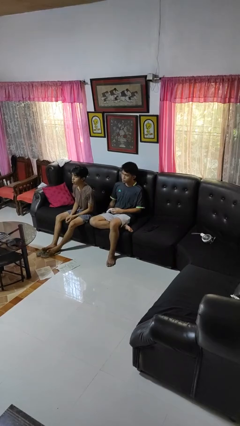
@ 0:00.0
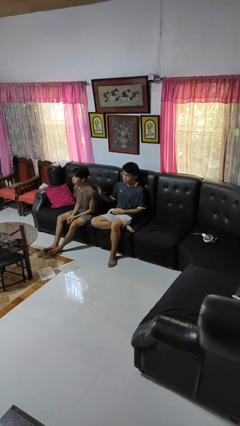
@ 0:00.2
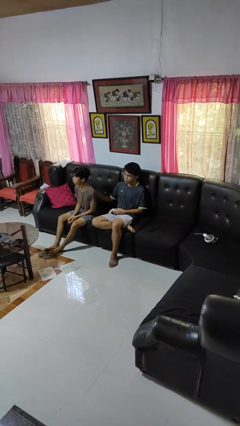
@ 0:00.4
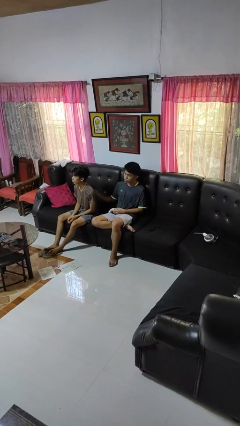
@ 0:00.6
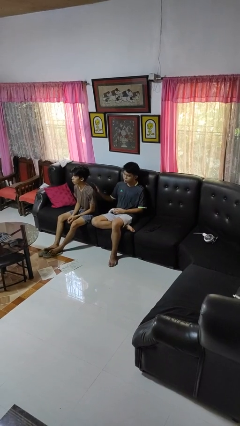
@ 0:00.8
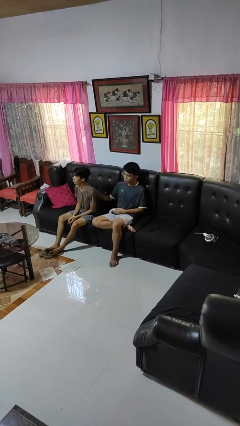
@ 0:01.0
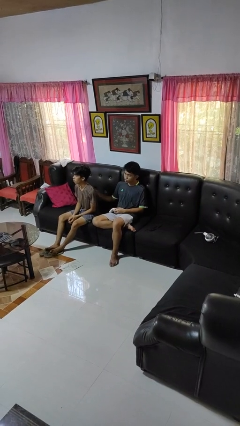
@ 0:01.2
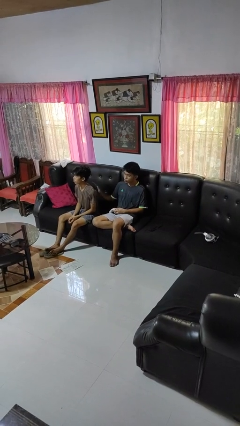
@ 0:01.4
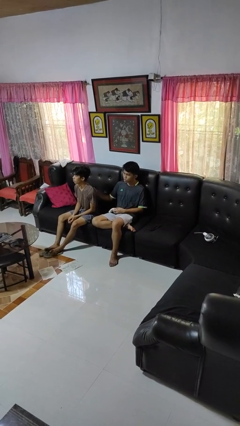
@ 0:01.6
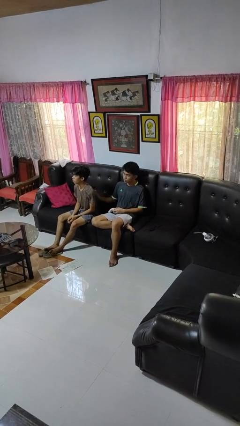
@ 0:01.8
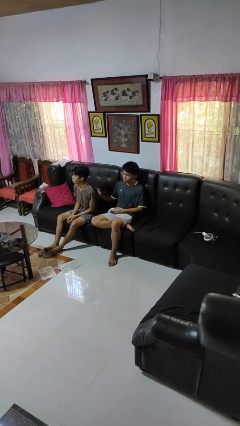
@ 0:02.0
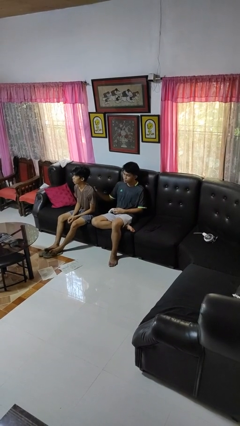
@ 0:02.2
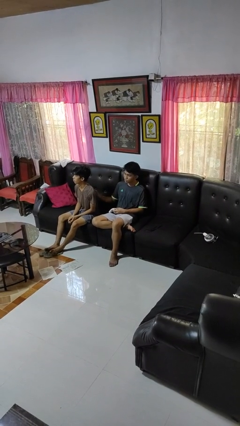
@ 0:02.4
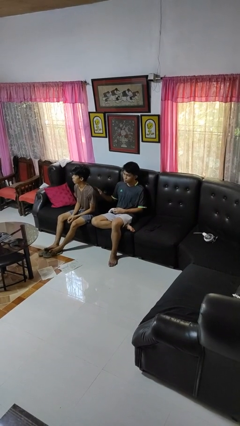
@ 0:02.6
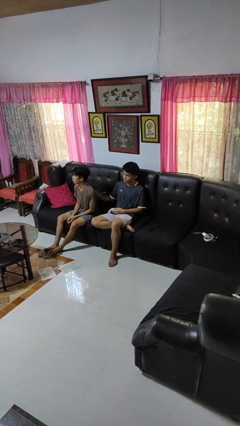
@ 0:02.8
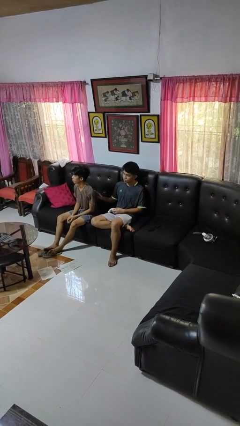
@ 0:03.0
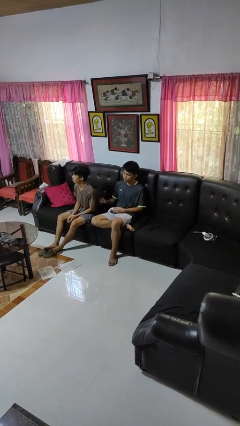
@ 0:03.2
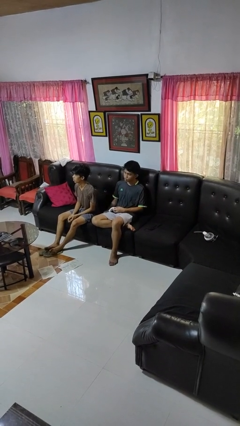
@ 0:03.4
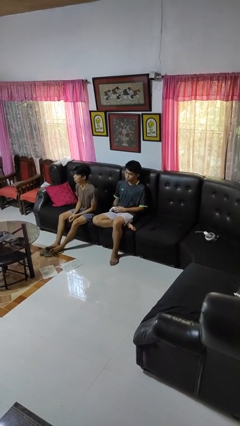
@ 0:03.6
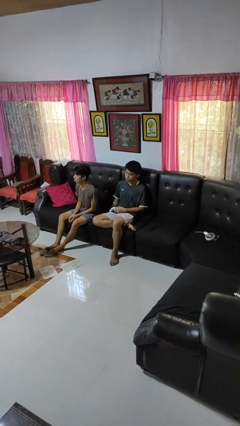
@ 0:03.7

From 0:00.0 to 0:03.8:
person touches back of person

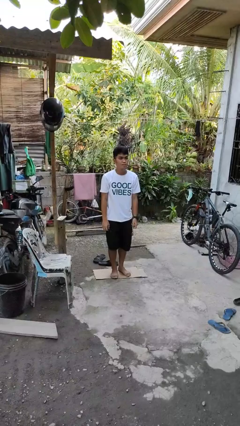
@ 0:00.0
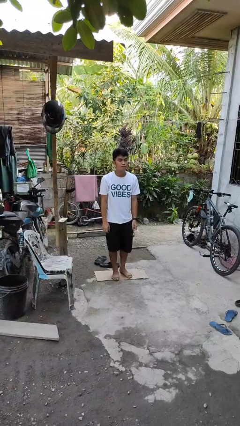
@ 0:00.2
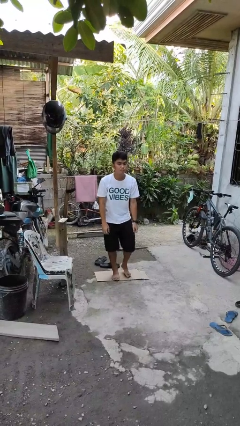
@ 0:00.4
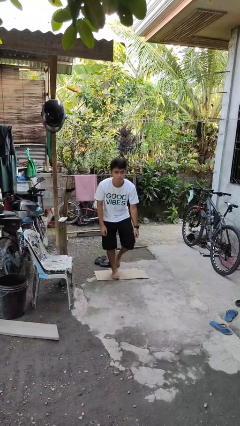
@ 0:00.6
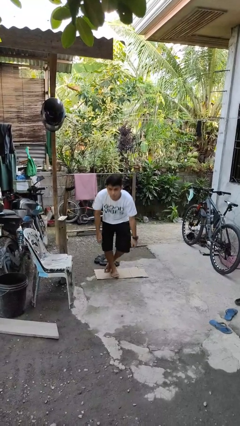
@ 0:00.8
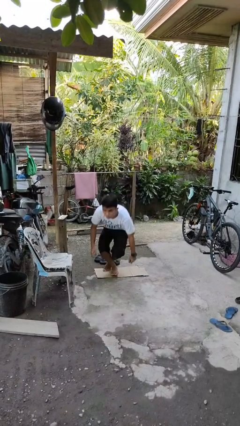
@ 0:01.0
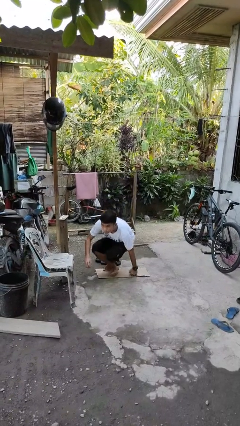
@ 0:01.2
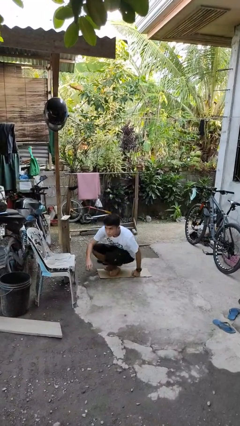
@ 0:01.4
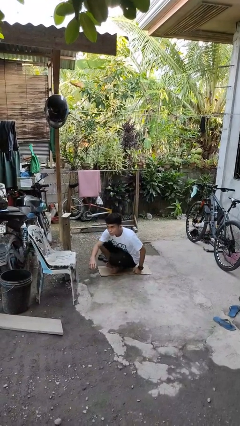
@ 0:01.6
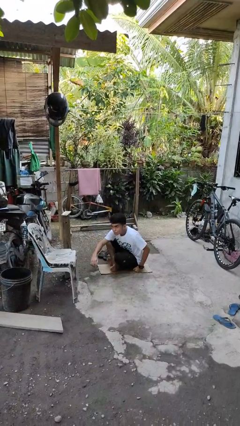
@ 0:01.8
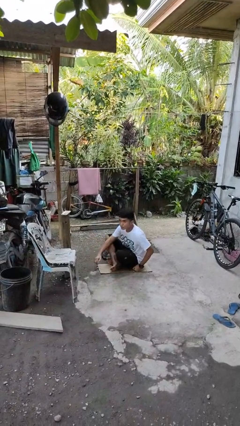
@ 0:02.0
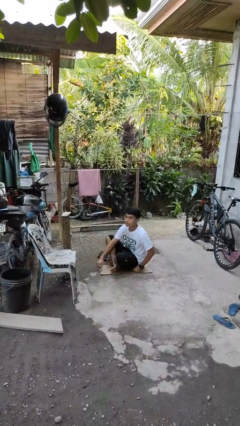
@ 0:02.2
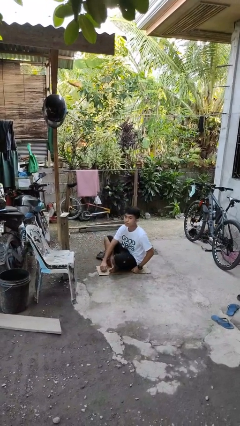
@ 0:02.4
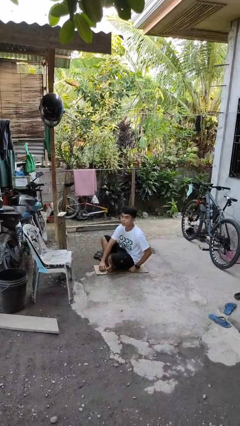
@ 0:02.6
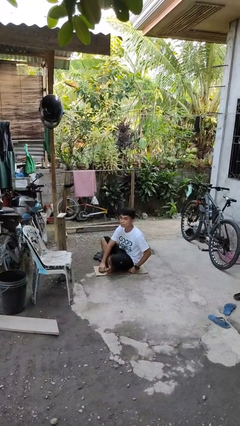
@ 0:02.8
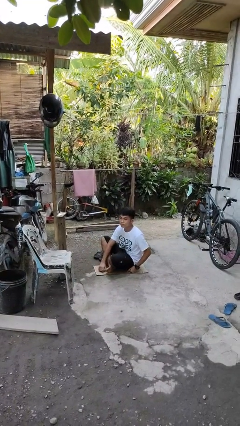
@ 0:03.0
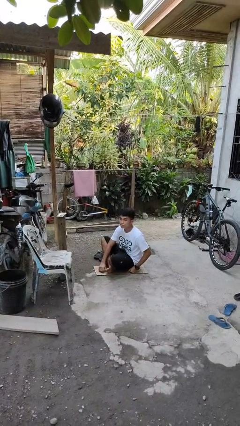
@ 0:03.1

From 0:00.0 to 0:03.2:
person sits crisscross

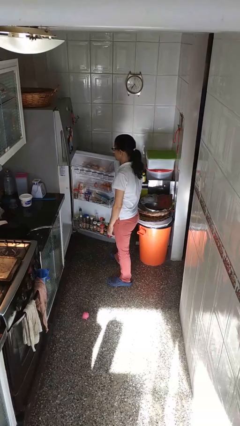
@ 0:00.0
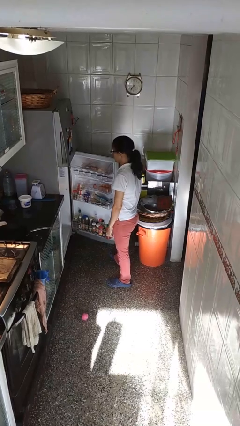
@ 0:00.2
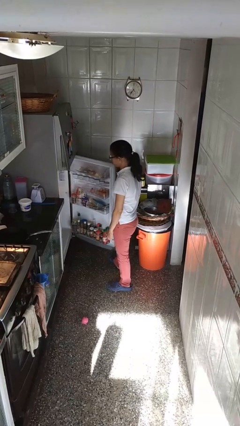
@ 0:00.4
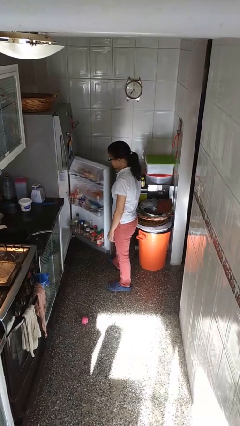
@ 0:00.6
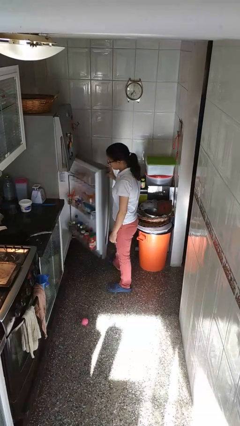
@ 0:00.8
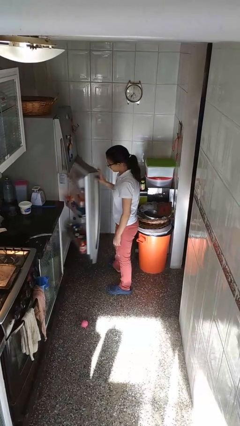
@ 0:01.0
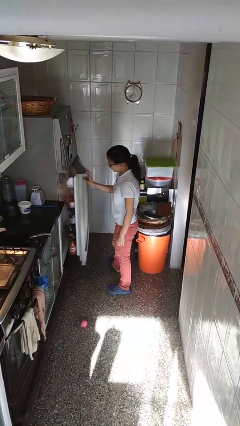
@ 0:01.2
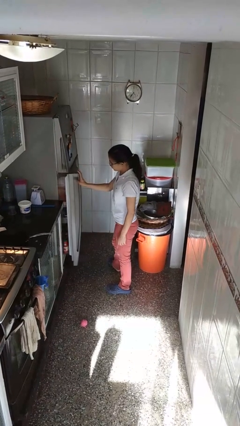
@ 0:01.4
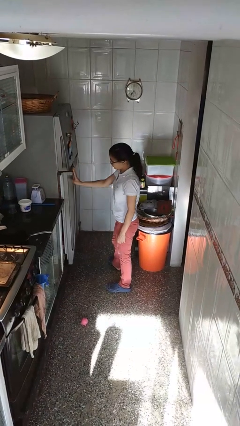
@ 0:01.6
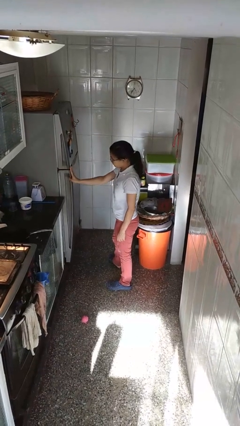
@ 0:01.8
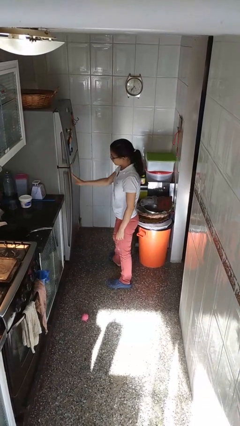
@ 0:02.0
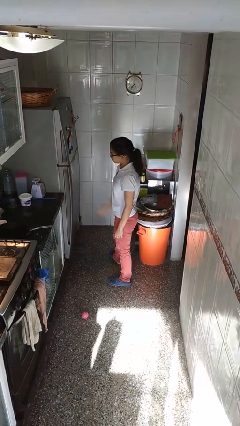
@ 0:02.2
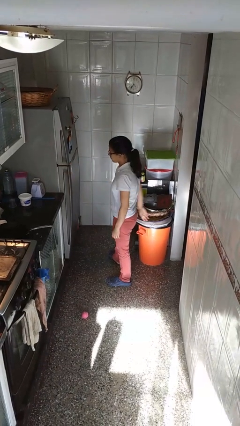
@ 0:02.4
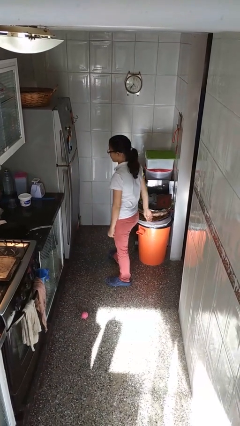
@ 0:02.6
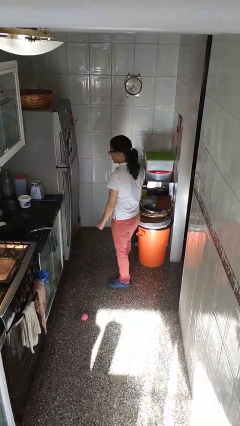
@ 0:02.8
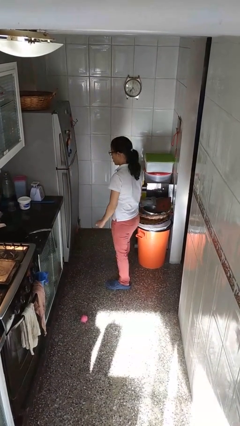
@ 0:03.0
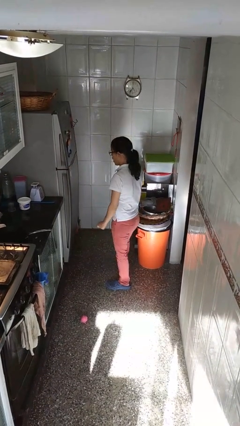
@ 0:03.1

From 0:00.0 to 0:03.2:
person closes refrigerator

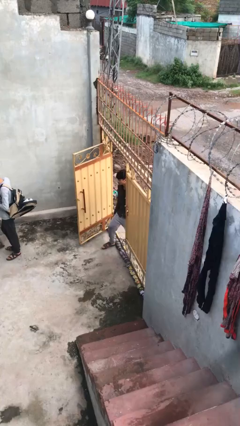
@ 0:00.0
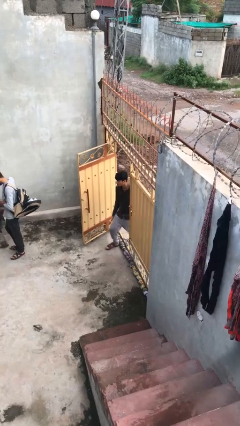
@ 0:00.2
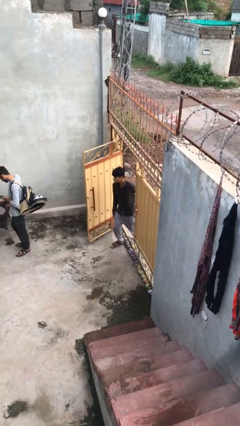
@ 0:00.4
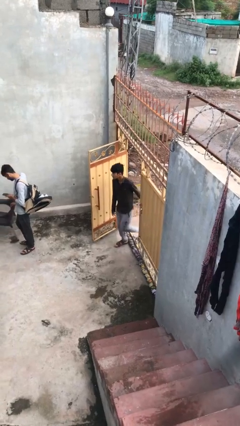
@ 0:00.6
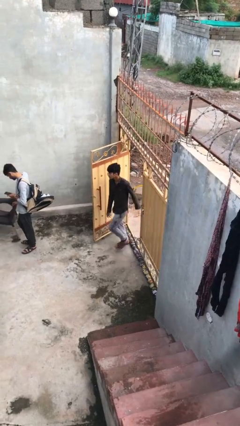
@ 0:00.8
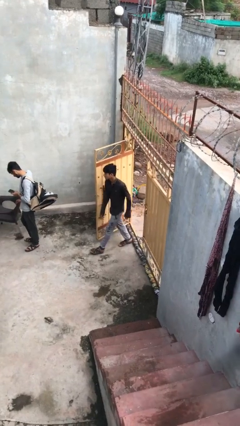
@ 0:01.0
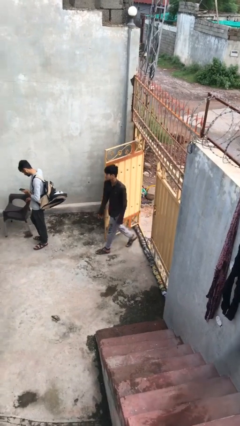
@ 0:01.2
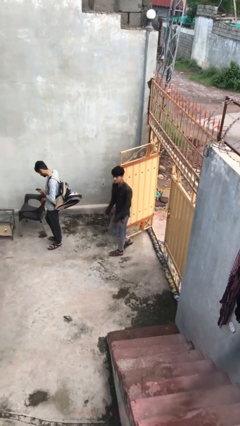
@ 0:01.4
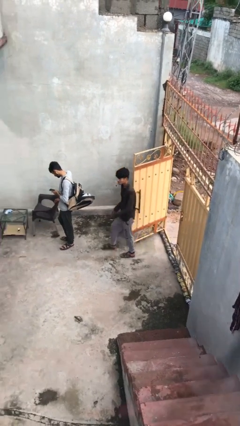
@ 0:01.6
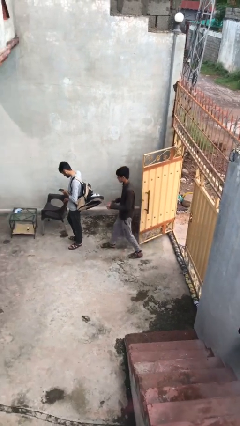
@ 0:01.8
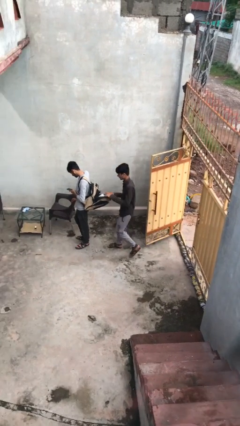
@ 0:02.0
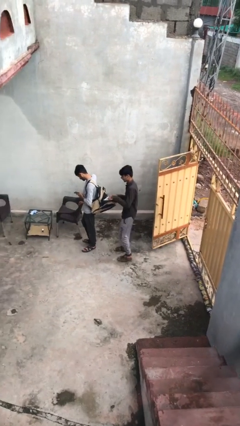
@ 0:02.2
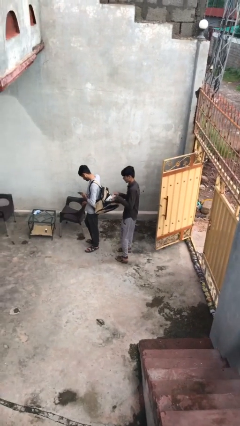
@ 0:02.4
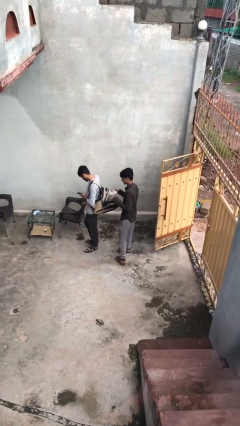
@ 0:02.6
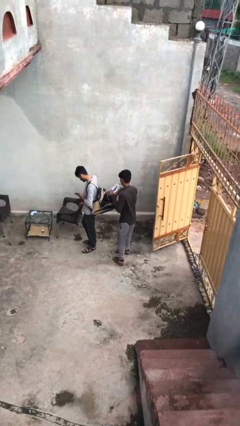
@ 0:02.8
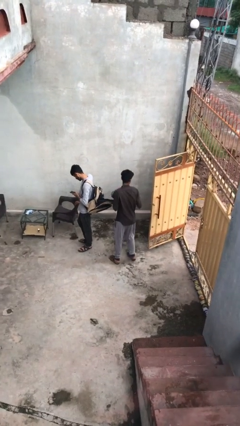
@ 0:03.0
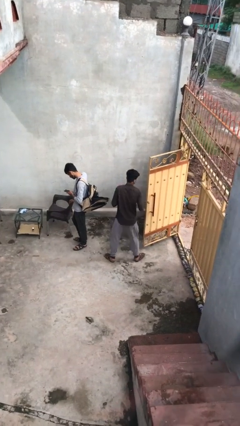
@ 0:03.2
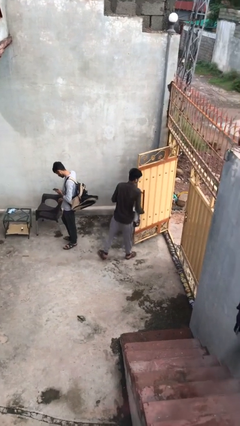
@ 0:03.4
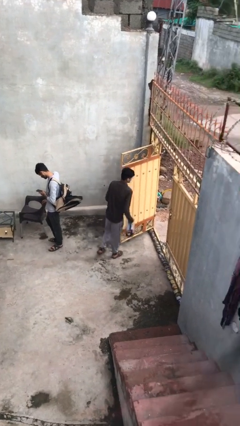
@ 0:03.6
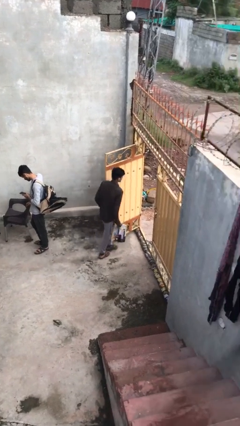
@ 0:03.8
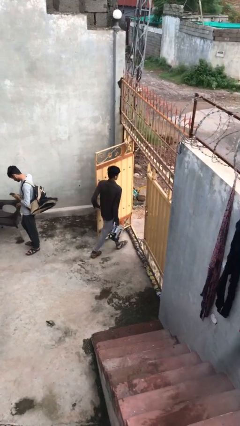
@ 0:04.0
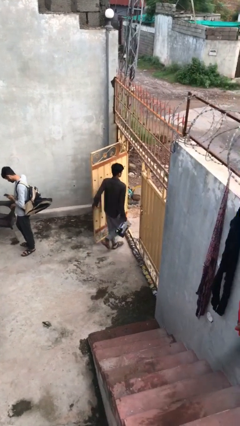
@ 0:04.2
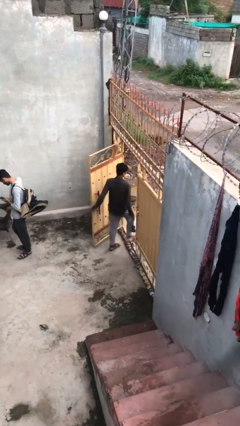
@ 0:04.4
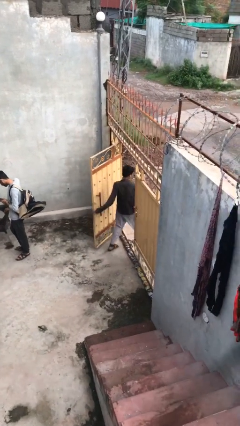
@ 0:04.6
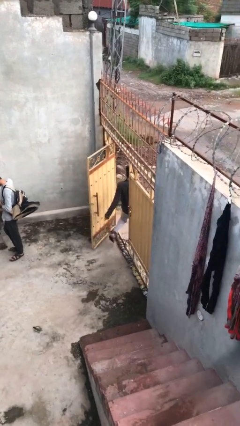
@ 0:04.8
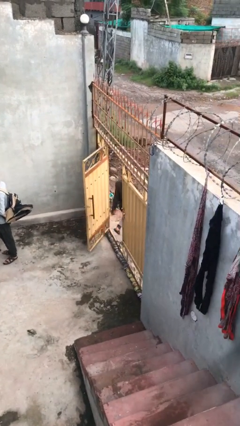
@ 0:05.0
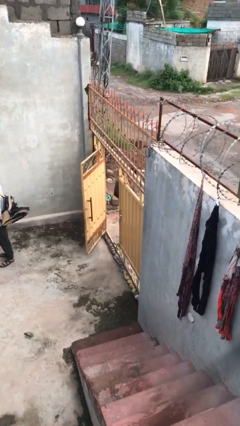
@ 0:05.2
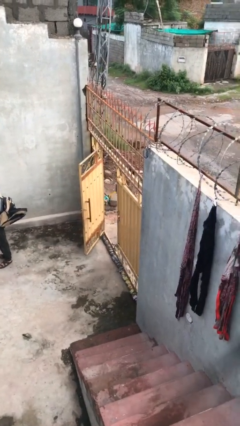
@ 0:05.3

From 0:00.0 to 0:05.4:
person steals object from person

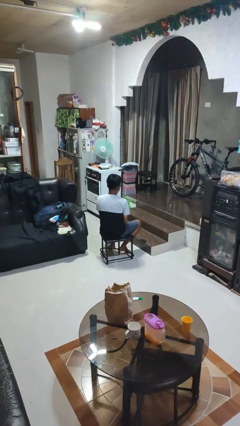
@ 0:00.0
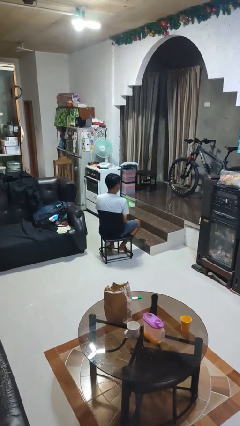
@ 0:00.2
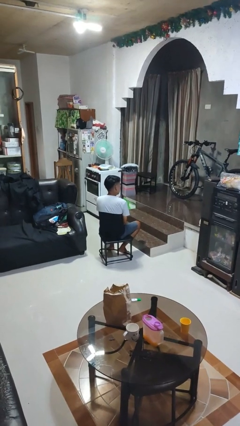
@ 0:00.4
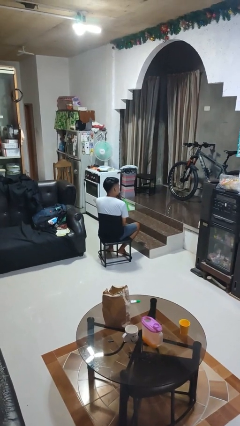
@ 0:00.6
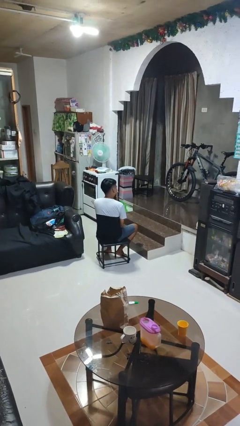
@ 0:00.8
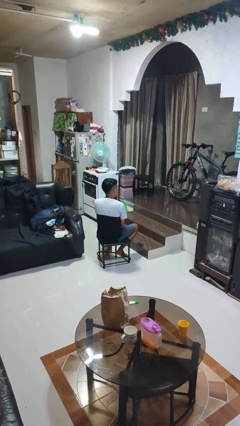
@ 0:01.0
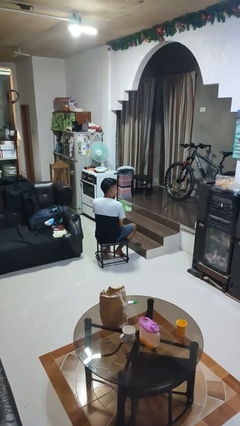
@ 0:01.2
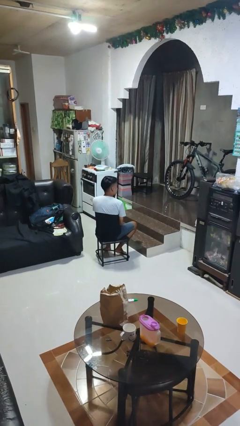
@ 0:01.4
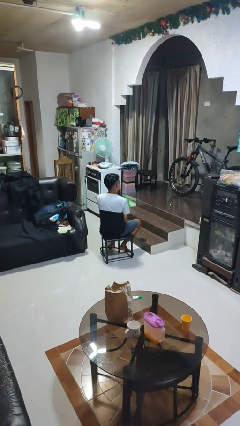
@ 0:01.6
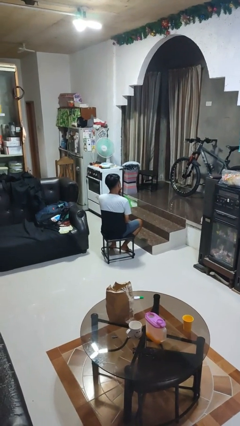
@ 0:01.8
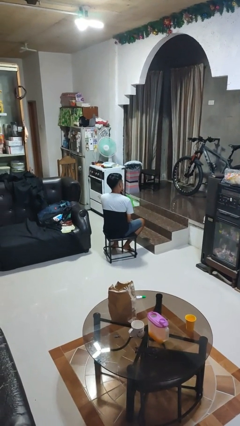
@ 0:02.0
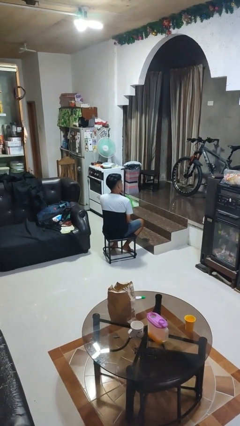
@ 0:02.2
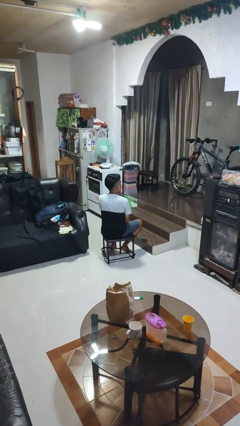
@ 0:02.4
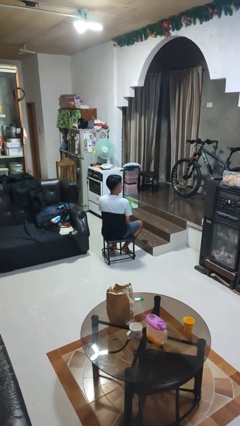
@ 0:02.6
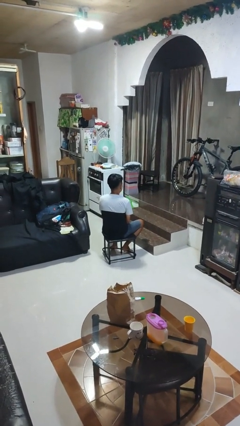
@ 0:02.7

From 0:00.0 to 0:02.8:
person strokes chin
